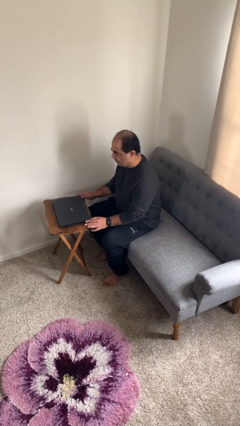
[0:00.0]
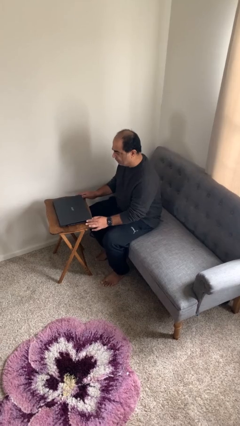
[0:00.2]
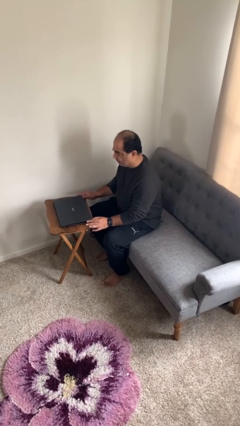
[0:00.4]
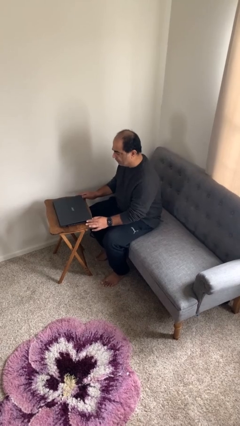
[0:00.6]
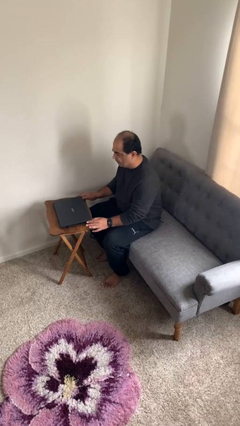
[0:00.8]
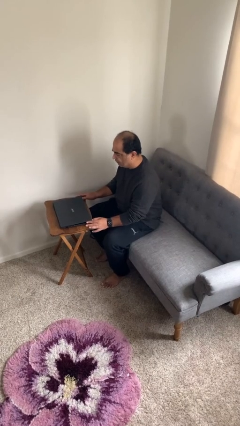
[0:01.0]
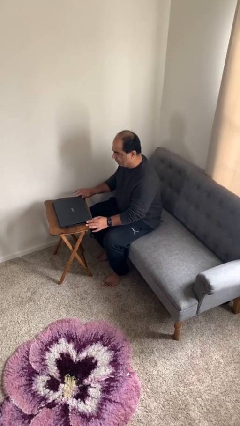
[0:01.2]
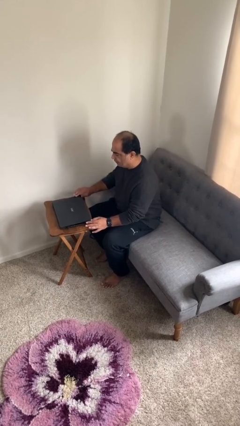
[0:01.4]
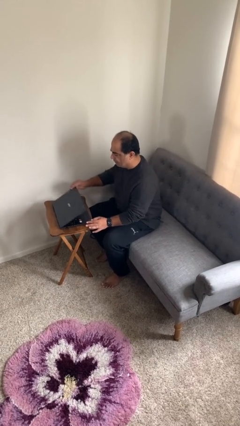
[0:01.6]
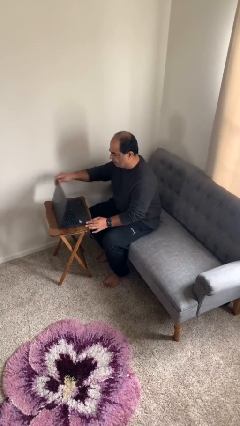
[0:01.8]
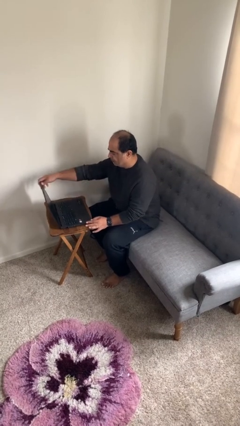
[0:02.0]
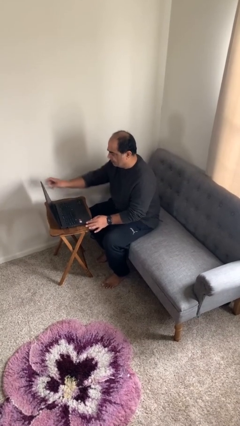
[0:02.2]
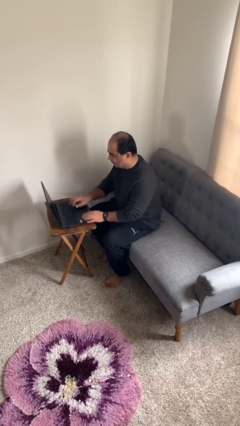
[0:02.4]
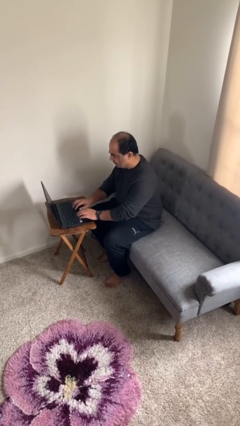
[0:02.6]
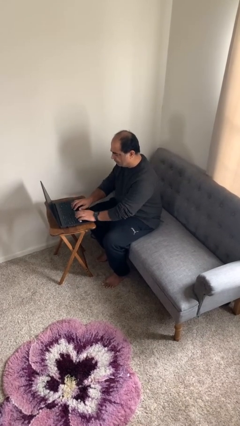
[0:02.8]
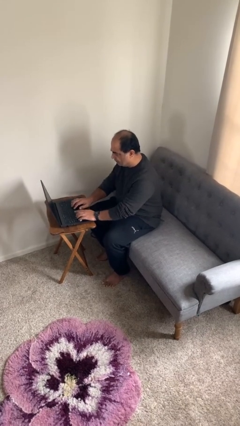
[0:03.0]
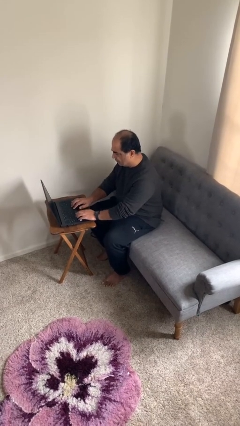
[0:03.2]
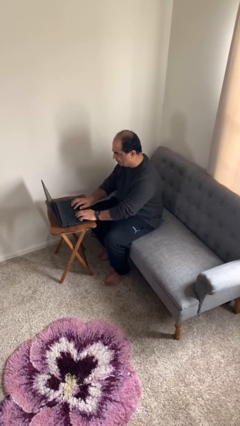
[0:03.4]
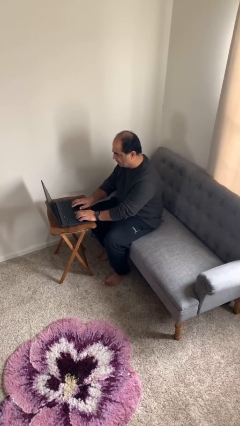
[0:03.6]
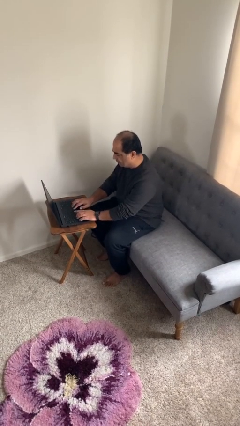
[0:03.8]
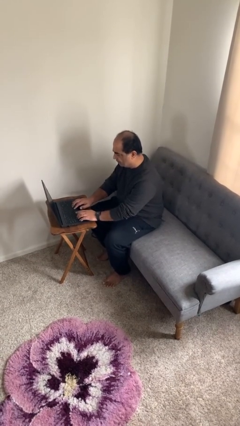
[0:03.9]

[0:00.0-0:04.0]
person interacts with laptop

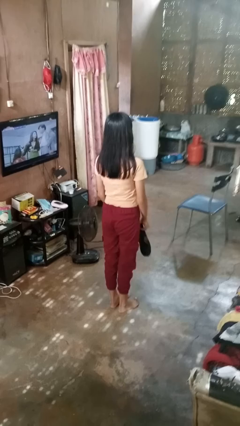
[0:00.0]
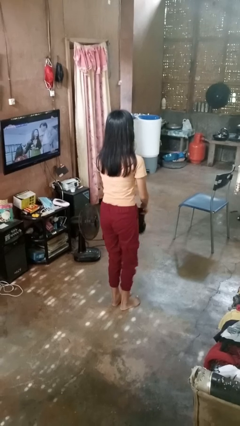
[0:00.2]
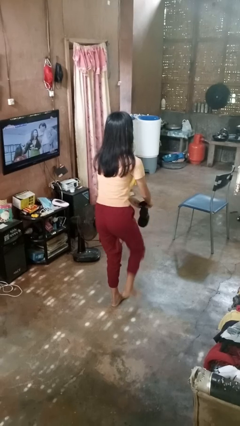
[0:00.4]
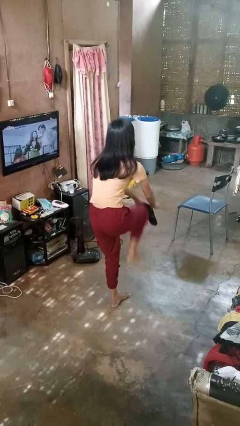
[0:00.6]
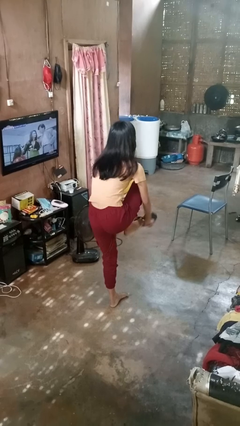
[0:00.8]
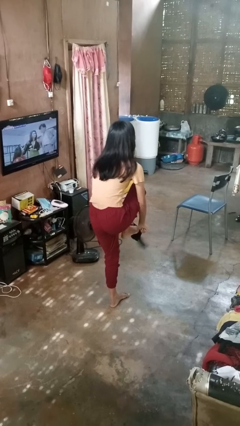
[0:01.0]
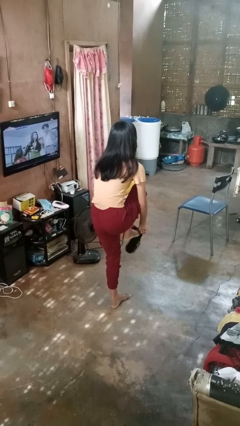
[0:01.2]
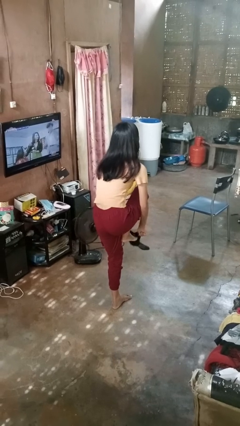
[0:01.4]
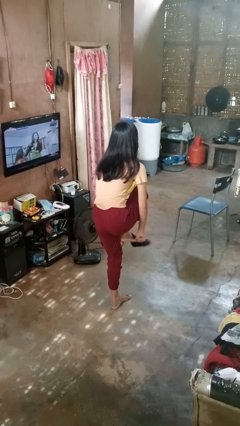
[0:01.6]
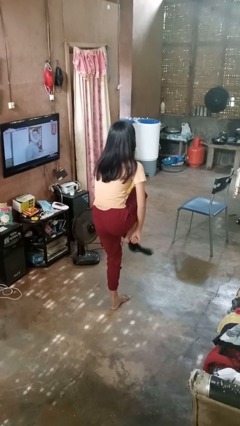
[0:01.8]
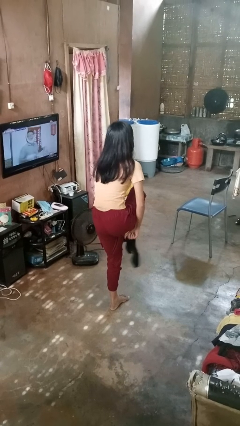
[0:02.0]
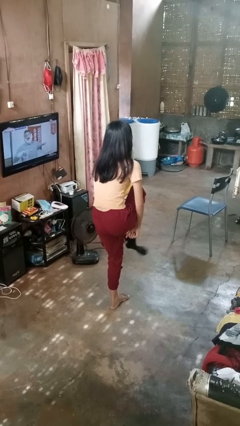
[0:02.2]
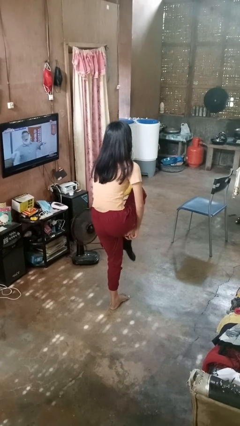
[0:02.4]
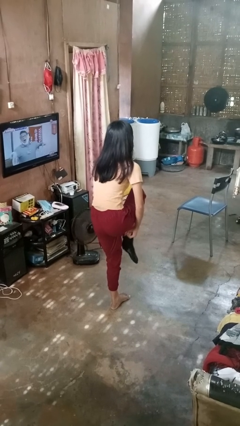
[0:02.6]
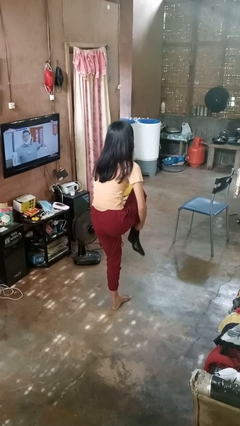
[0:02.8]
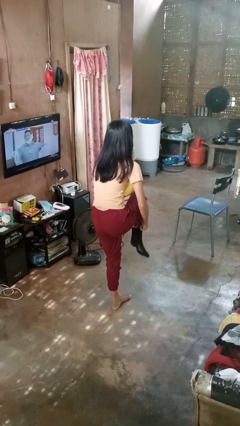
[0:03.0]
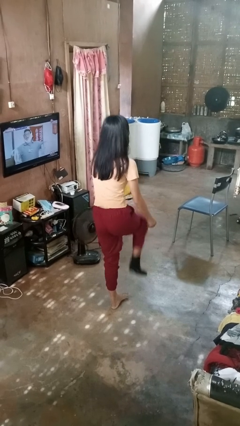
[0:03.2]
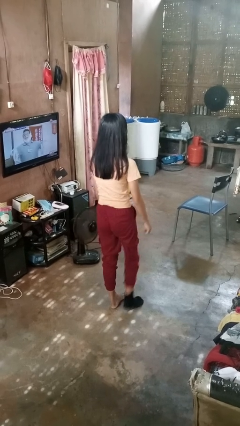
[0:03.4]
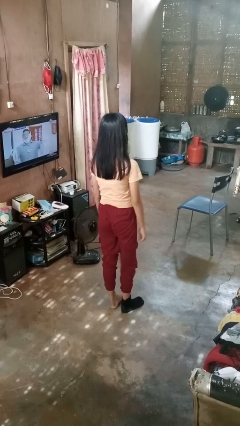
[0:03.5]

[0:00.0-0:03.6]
person puts on socks

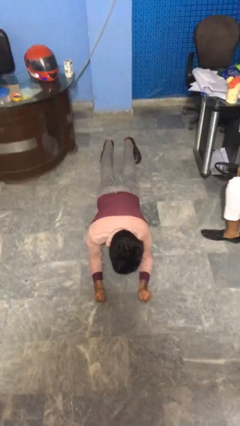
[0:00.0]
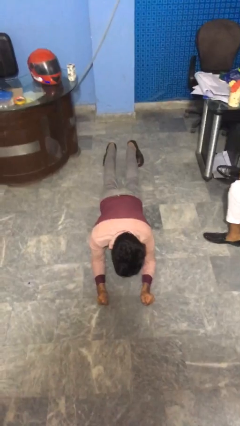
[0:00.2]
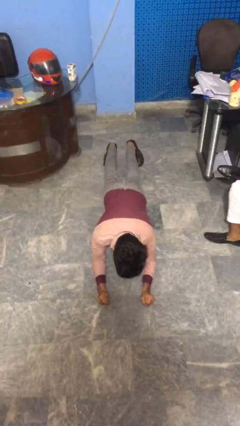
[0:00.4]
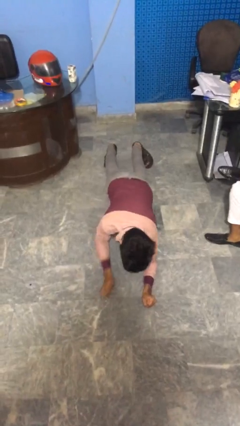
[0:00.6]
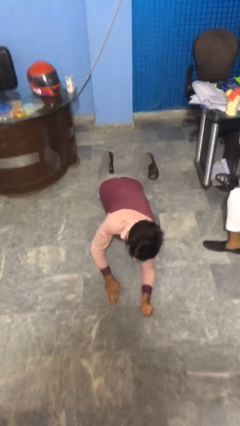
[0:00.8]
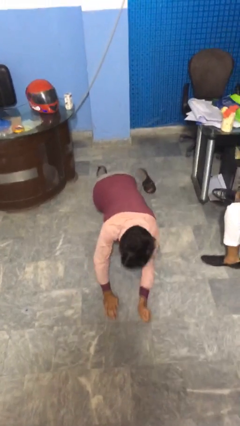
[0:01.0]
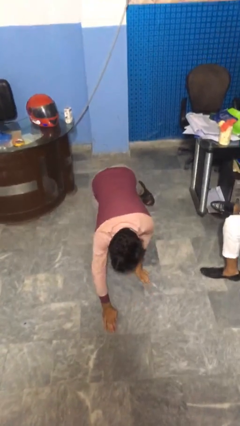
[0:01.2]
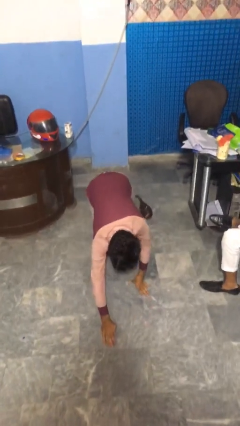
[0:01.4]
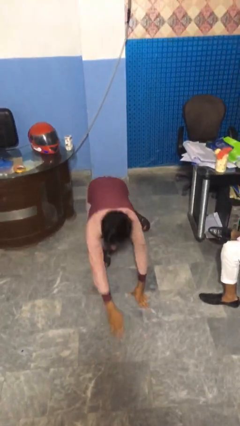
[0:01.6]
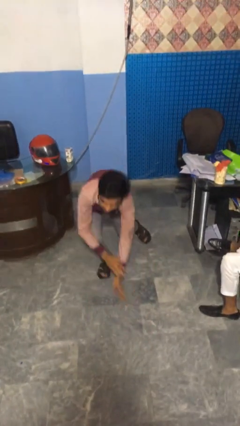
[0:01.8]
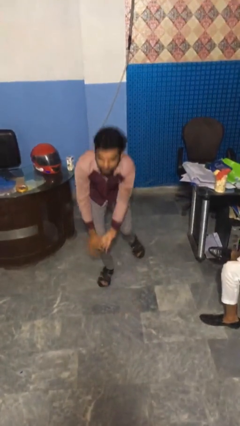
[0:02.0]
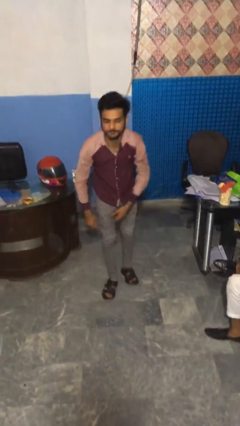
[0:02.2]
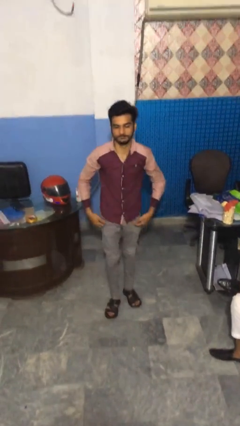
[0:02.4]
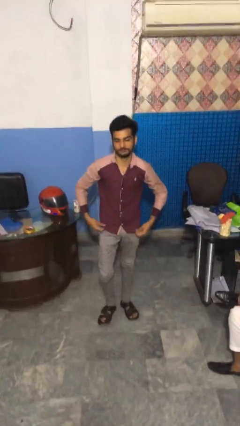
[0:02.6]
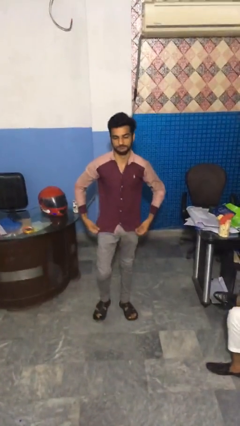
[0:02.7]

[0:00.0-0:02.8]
person stands up from floor

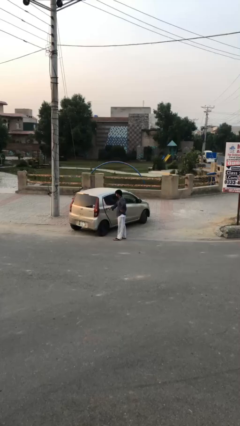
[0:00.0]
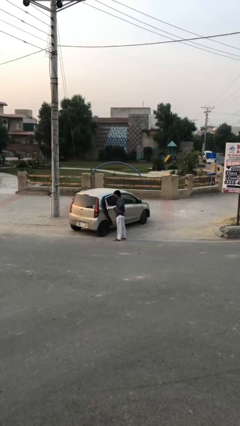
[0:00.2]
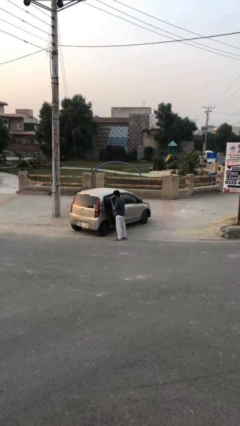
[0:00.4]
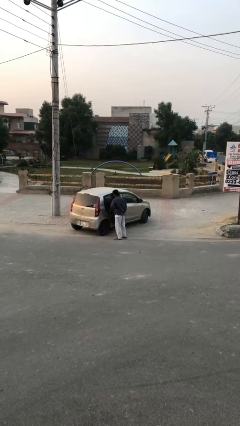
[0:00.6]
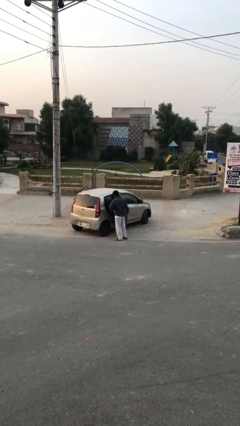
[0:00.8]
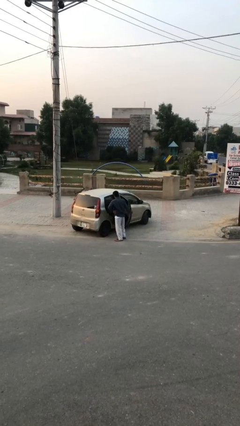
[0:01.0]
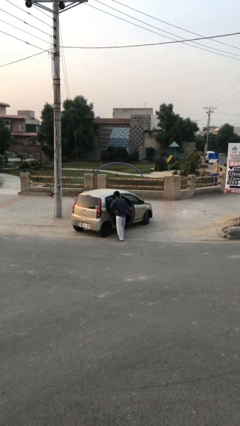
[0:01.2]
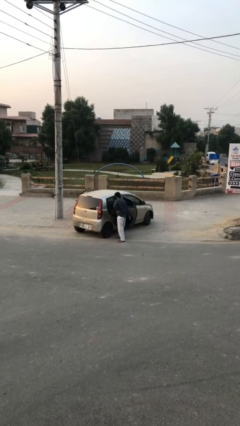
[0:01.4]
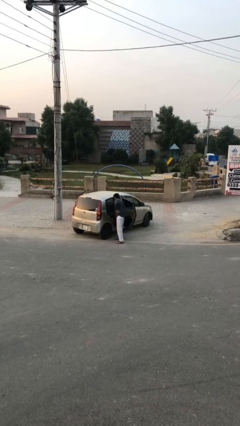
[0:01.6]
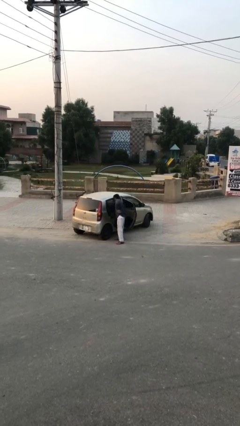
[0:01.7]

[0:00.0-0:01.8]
person opens car door

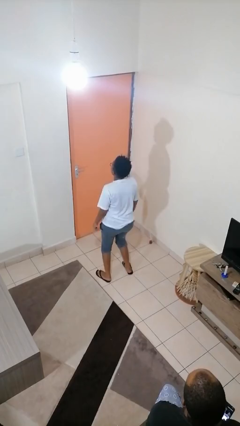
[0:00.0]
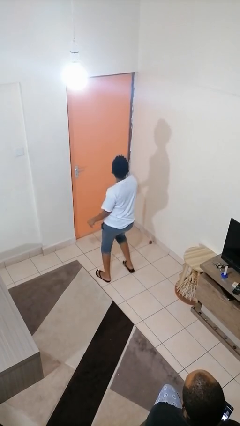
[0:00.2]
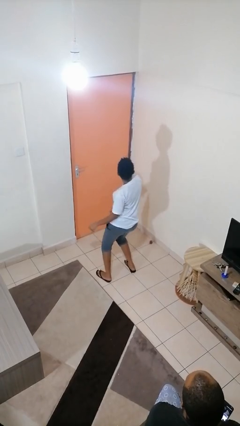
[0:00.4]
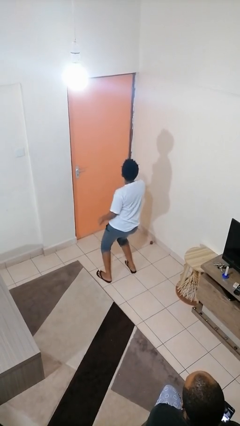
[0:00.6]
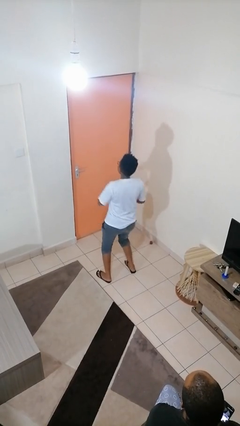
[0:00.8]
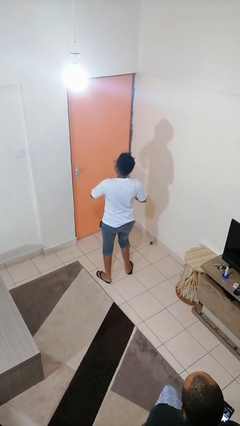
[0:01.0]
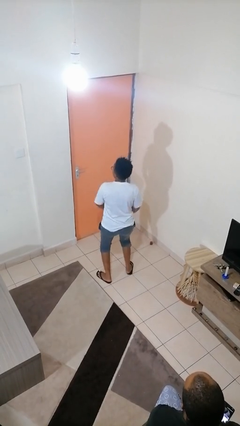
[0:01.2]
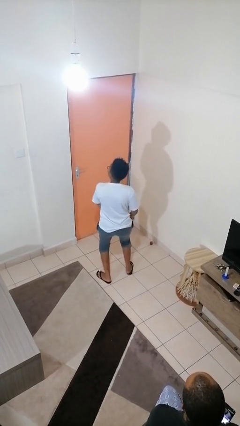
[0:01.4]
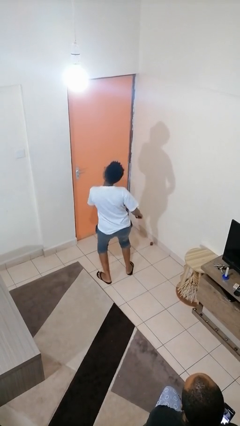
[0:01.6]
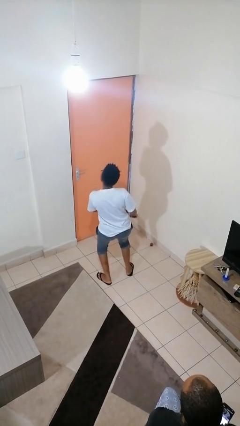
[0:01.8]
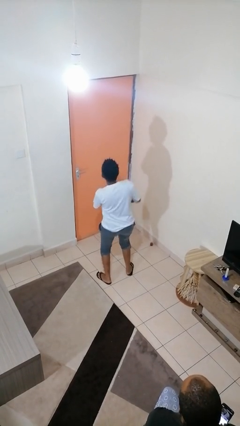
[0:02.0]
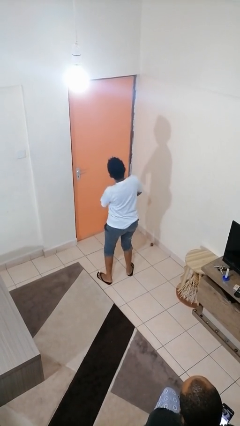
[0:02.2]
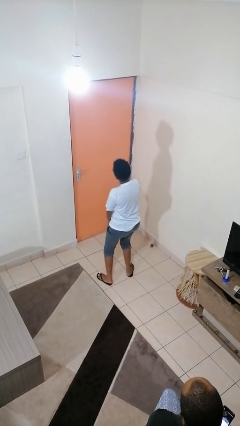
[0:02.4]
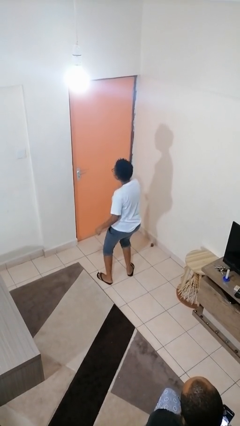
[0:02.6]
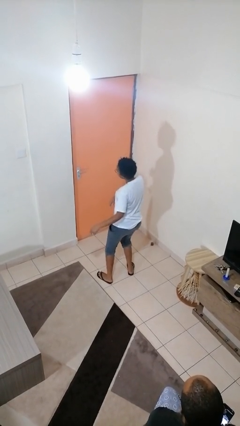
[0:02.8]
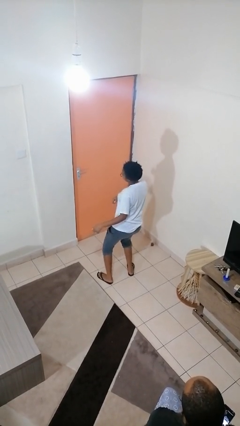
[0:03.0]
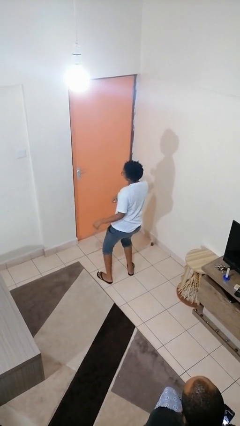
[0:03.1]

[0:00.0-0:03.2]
person dances in place

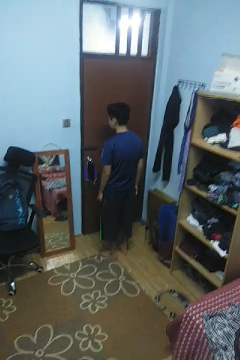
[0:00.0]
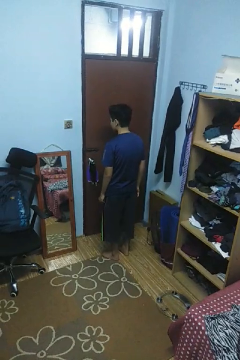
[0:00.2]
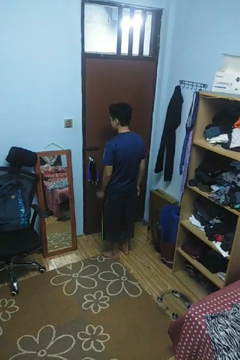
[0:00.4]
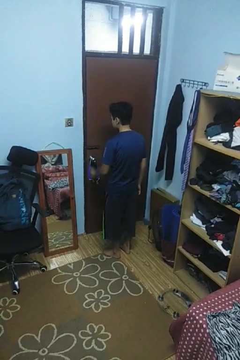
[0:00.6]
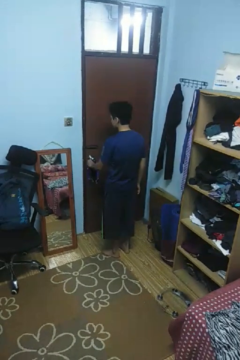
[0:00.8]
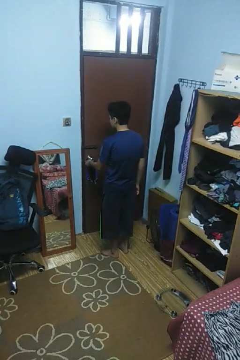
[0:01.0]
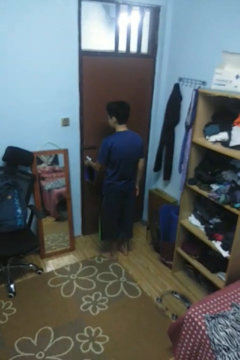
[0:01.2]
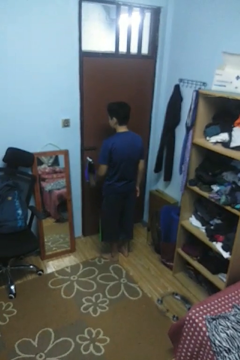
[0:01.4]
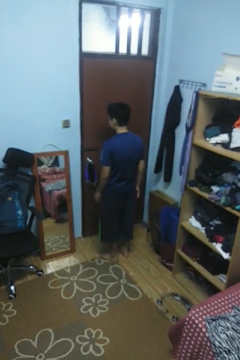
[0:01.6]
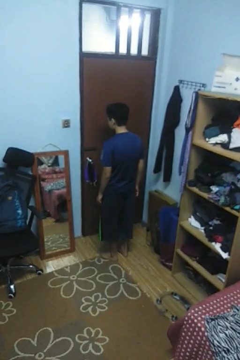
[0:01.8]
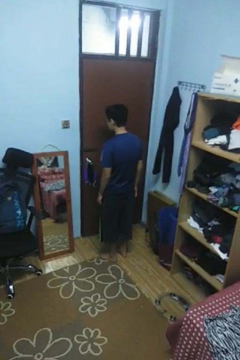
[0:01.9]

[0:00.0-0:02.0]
person unlocks door with keys

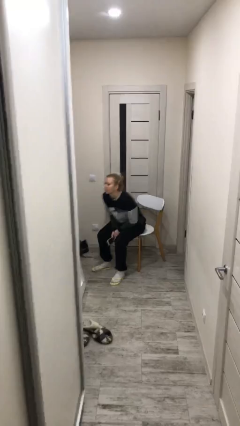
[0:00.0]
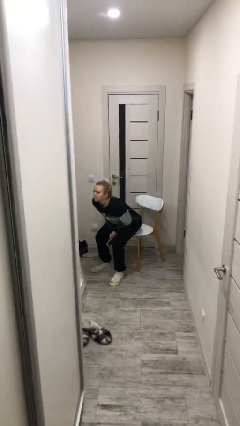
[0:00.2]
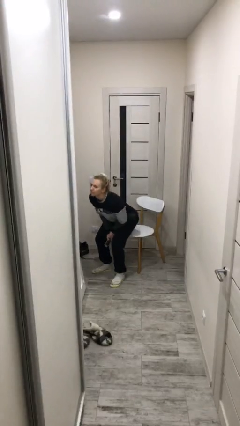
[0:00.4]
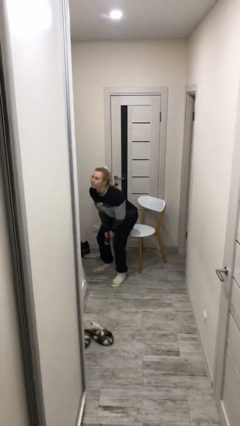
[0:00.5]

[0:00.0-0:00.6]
person stands up
